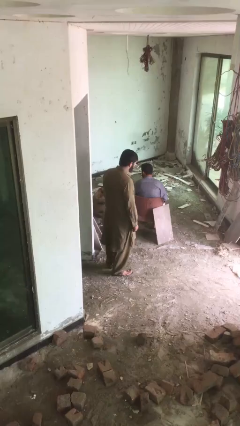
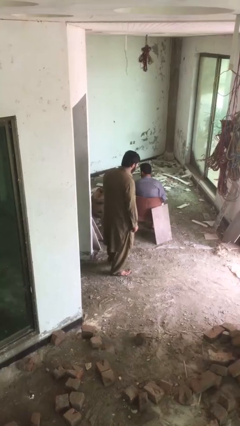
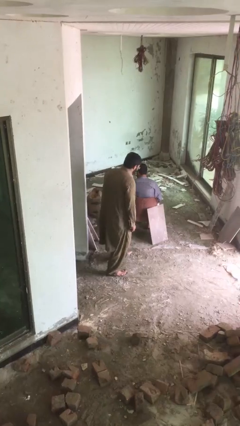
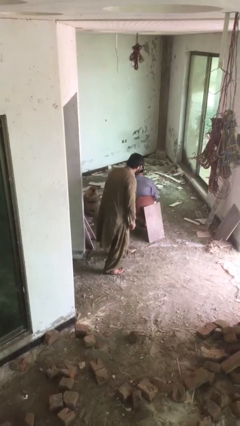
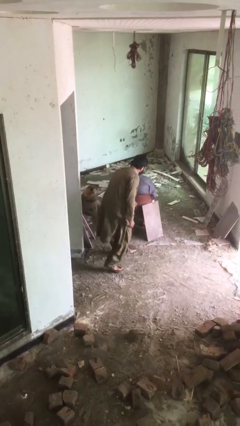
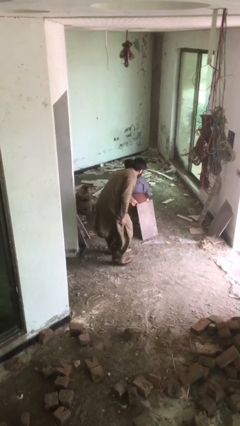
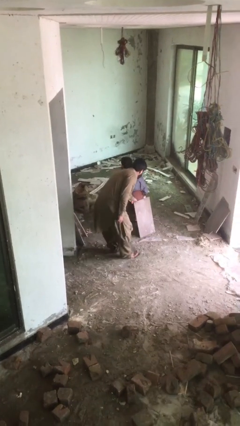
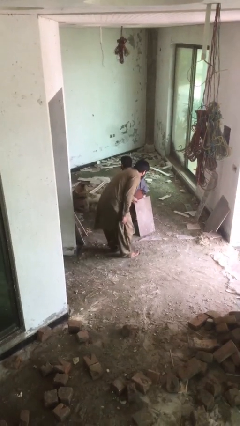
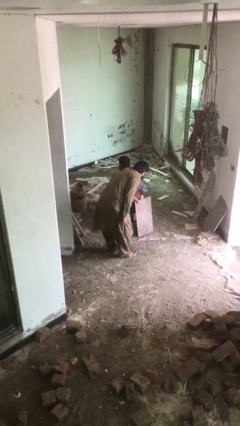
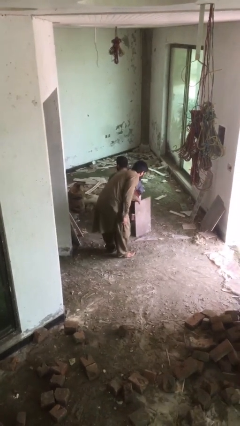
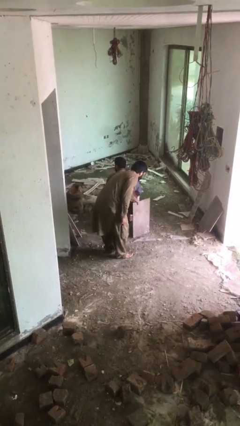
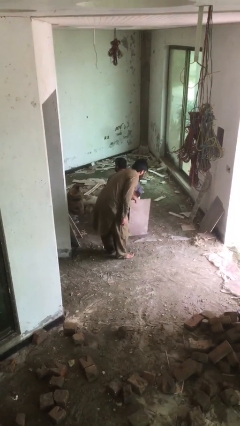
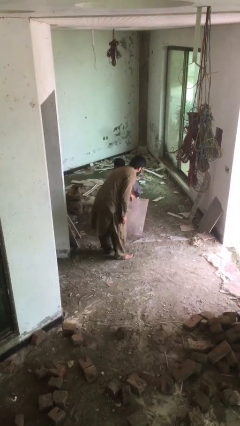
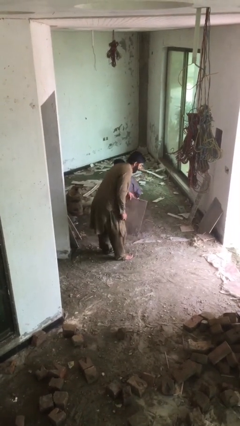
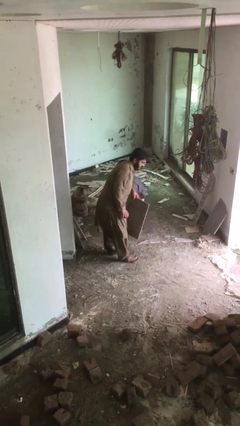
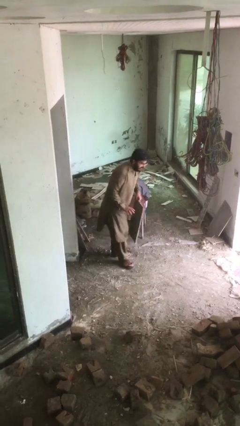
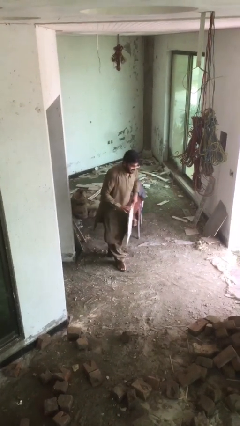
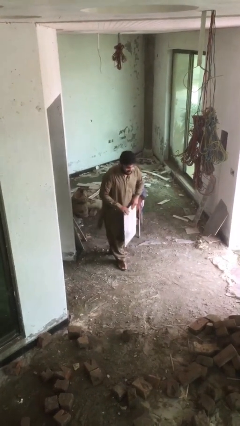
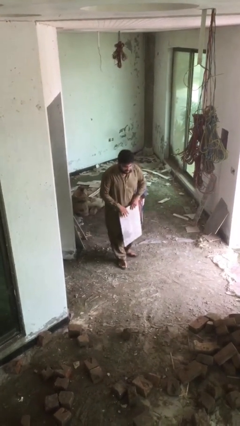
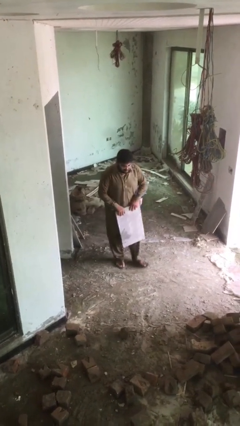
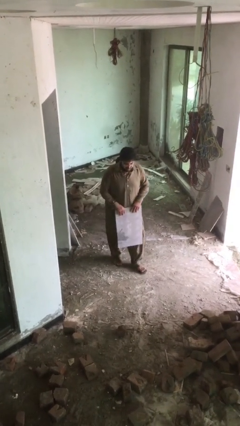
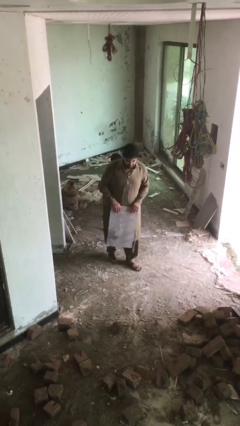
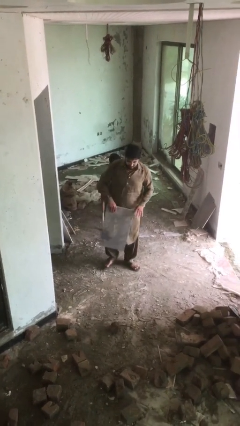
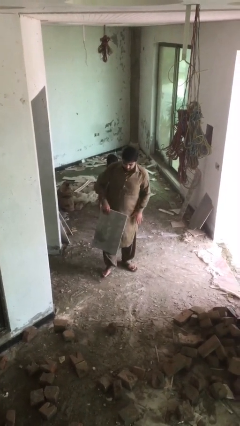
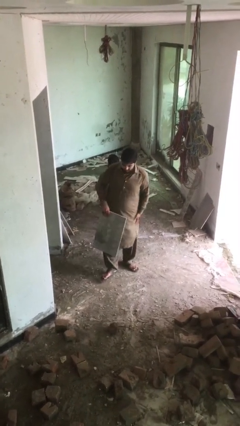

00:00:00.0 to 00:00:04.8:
person steals object from person

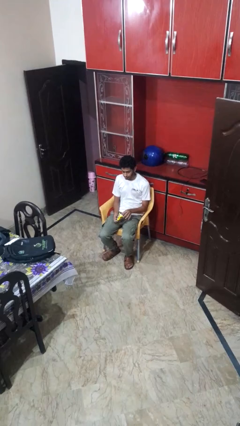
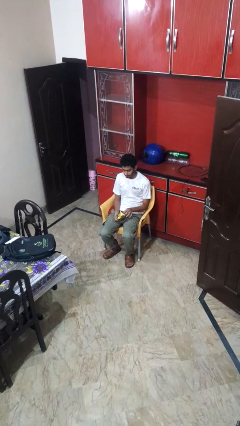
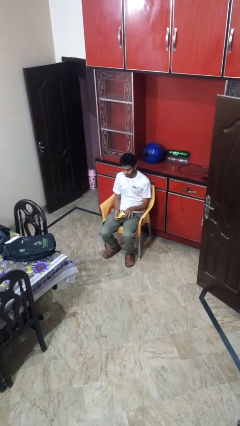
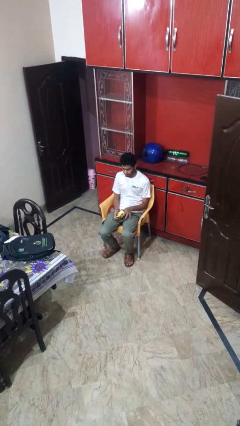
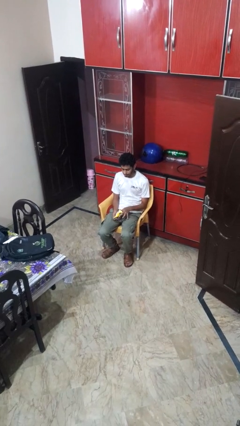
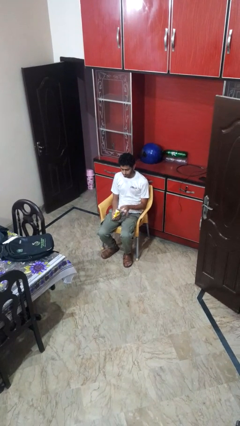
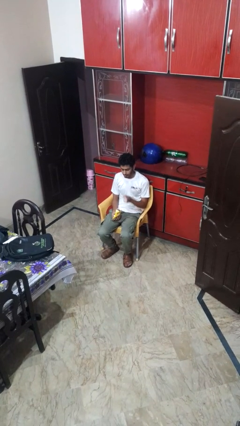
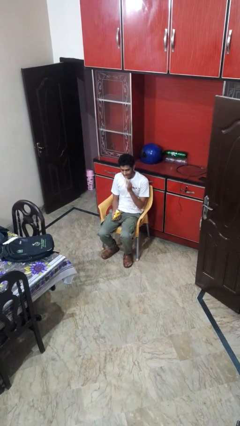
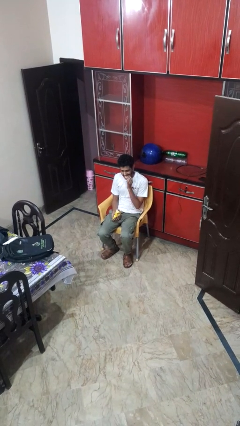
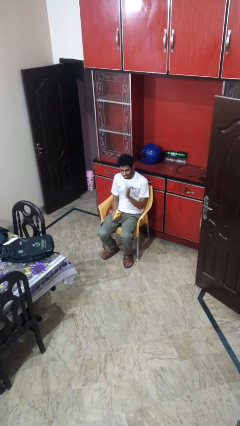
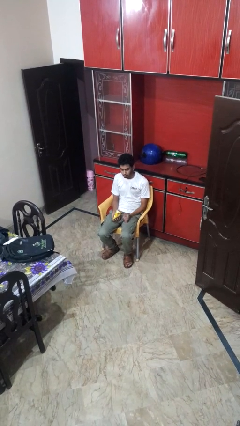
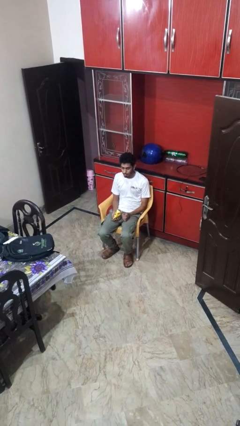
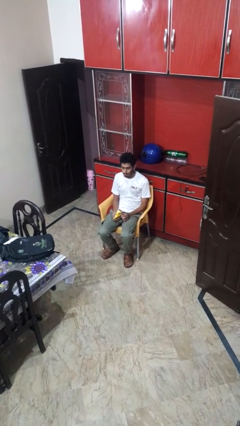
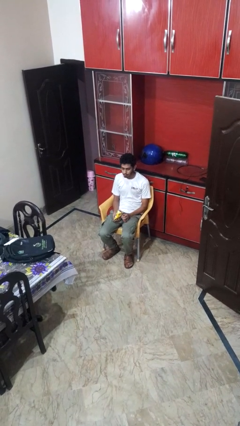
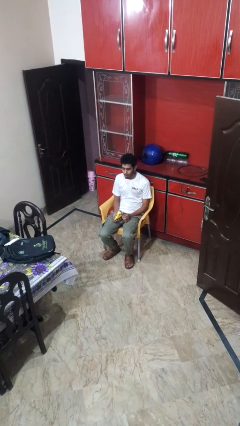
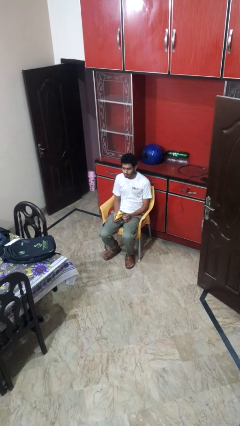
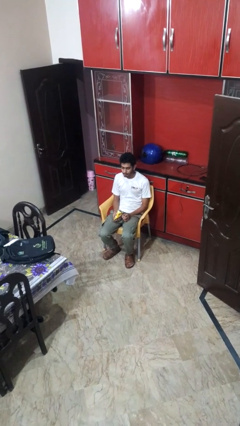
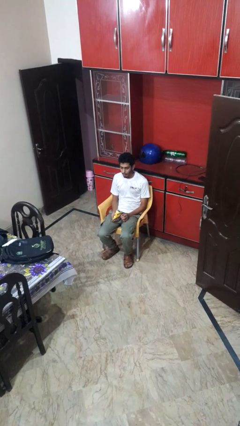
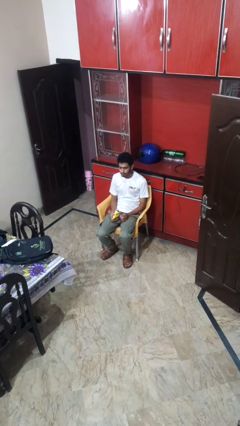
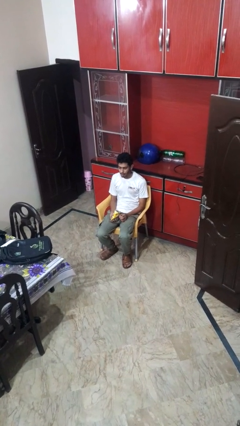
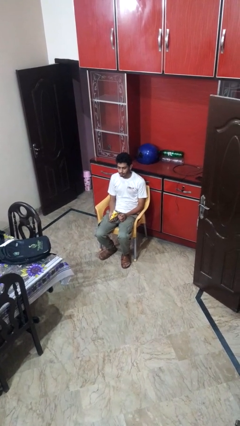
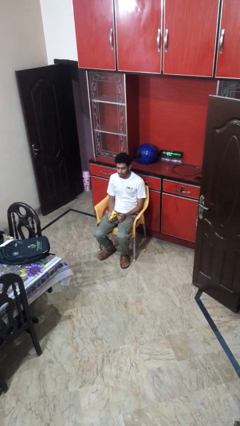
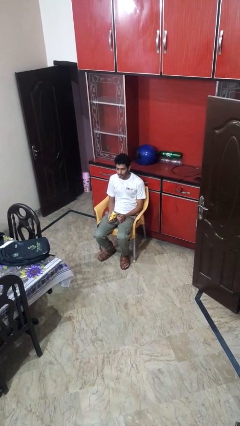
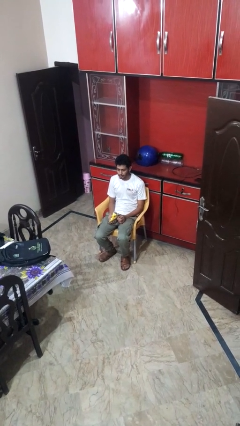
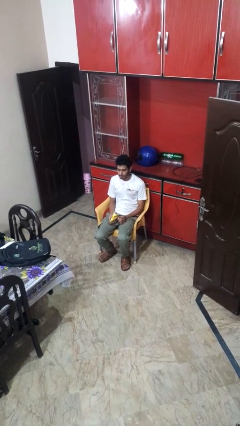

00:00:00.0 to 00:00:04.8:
person eats snack from bag

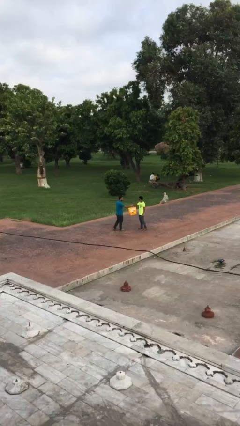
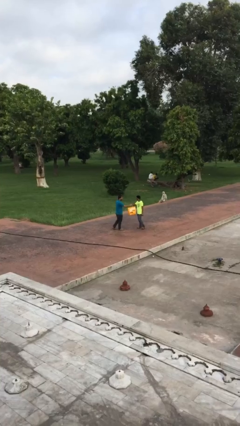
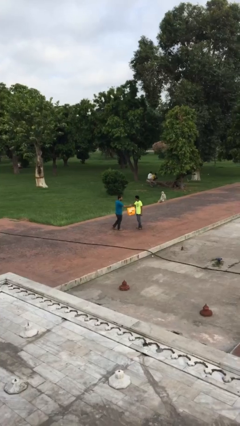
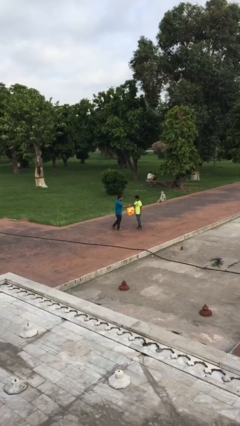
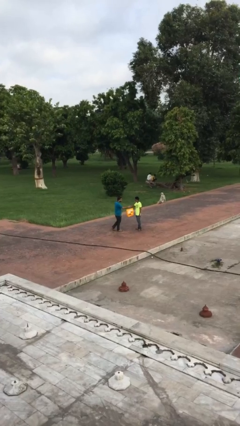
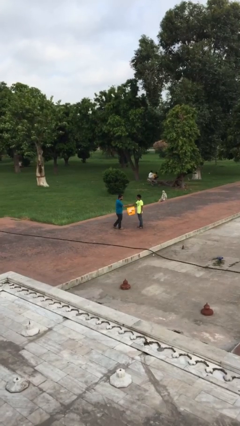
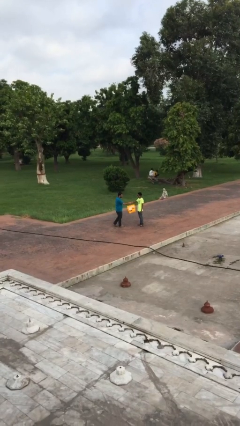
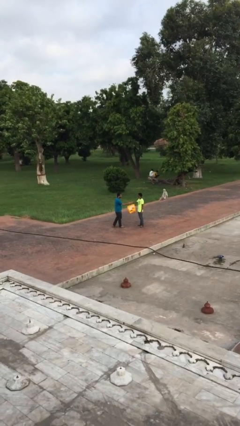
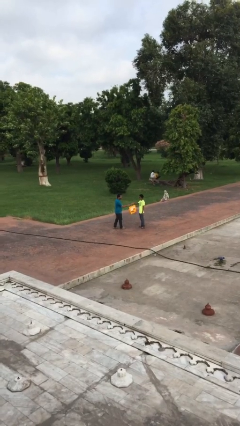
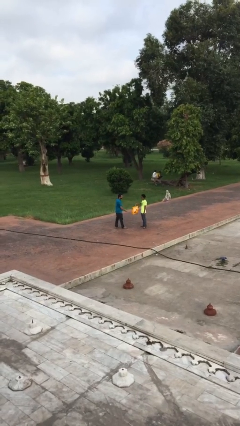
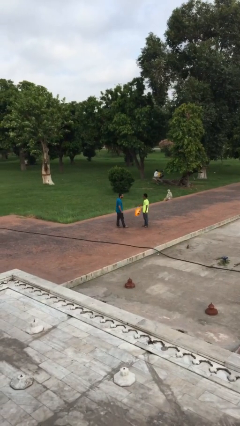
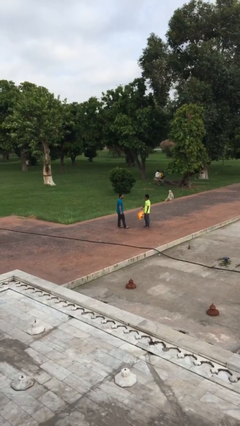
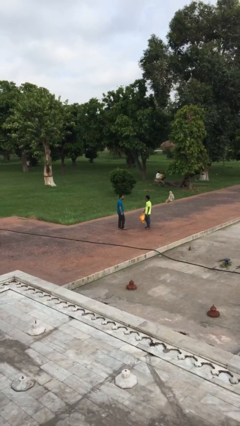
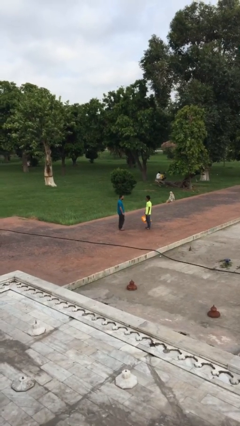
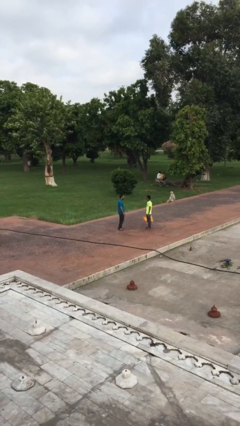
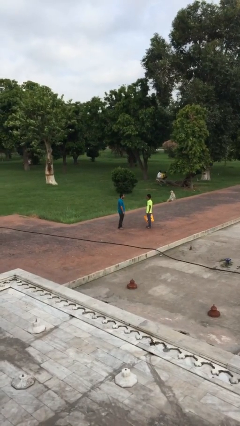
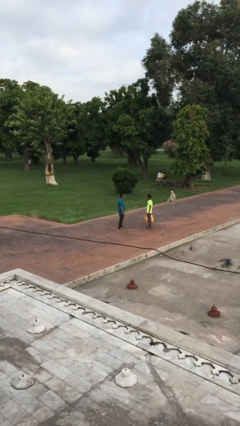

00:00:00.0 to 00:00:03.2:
person transfers object to person

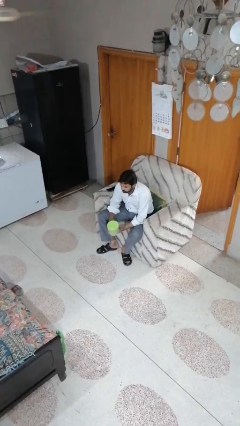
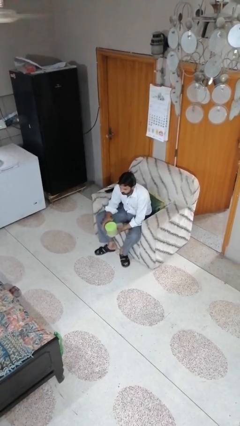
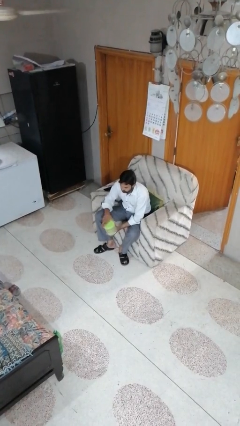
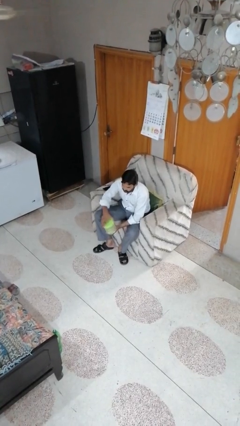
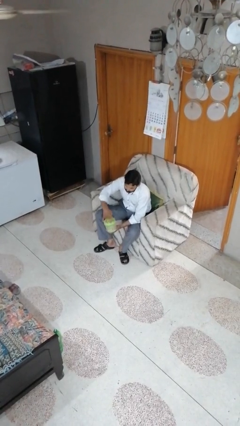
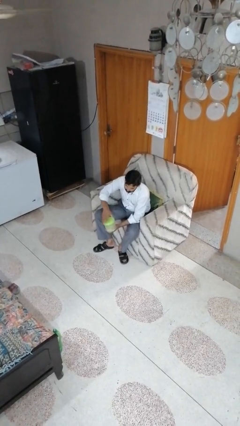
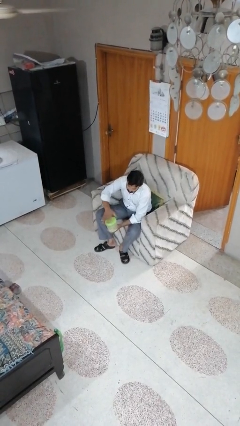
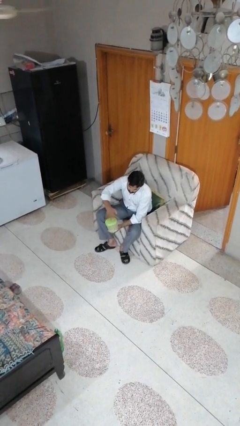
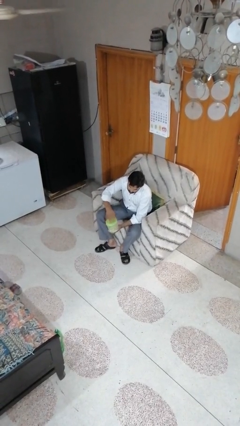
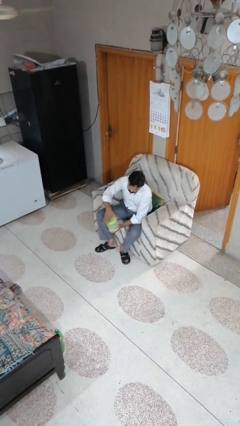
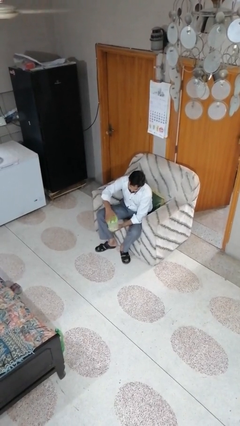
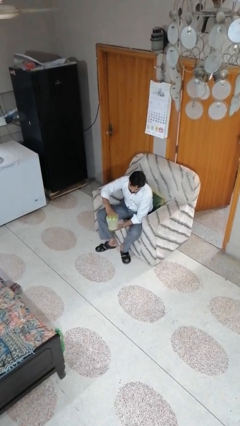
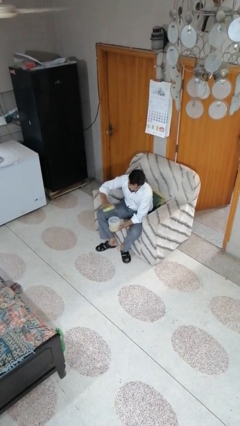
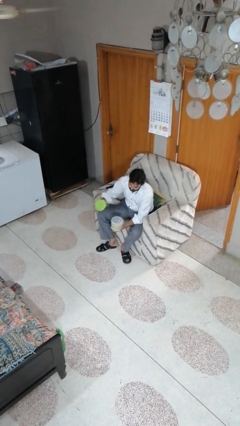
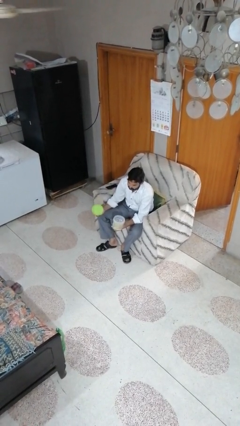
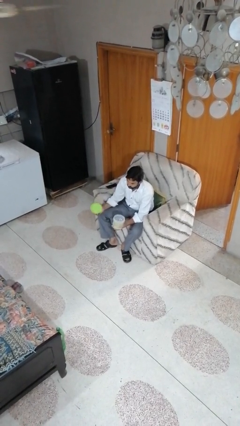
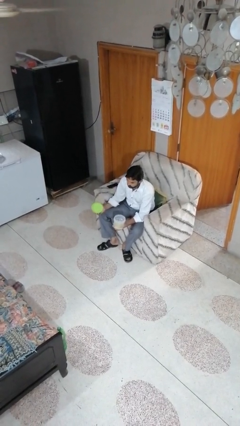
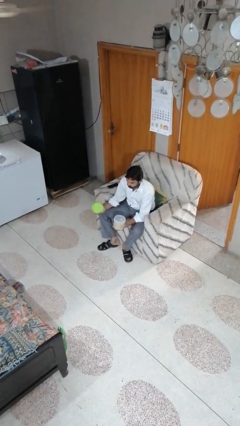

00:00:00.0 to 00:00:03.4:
person opens jar

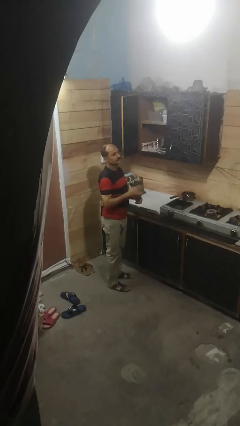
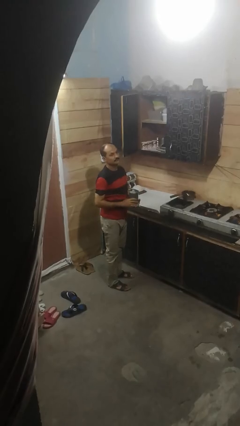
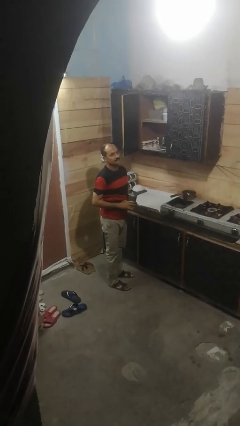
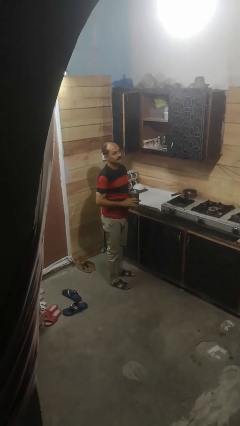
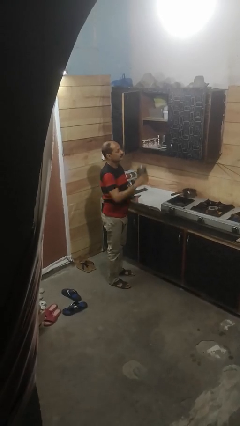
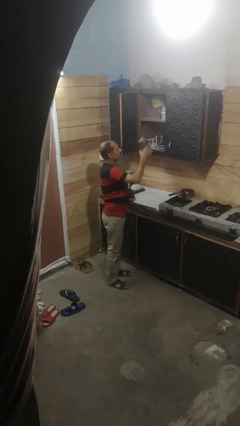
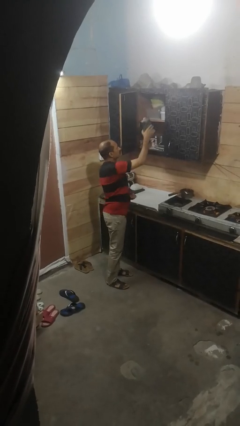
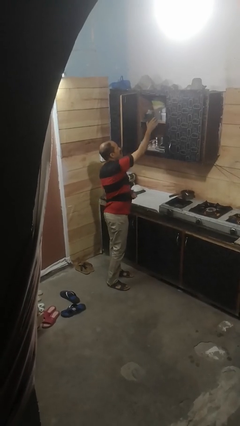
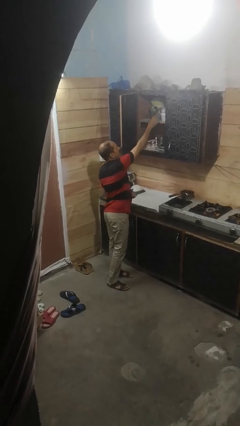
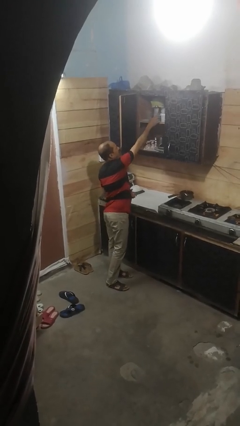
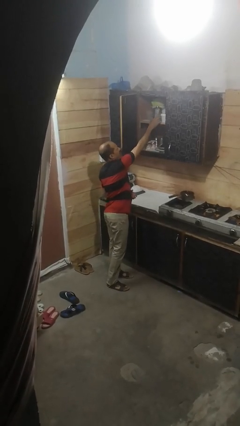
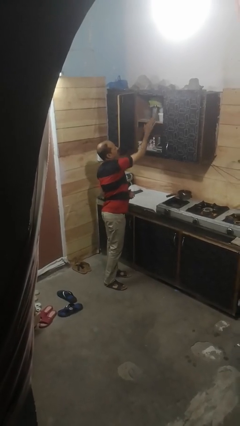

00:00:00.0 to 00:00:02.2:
person puts down object into cabinet
